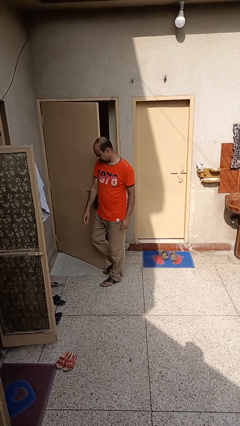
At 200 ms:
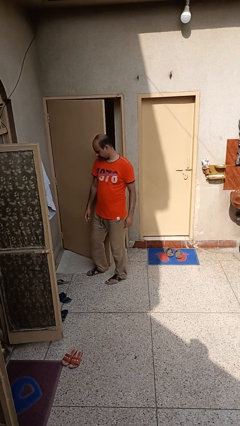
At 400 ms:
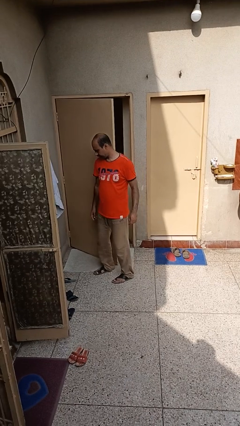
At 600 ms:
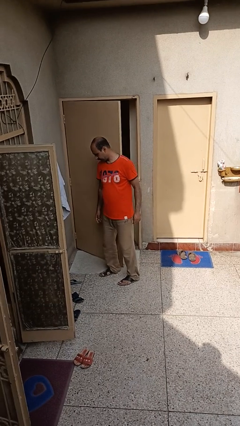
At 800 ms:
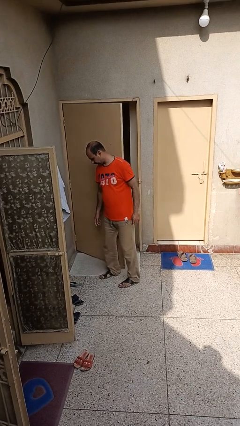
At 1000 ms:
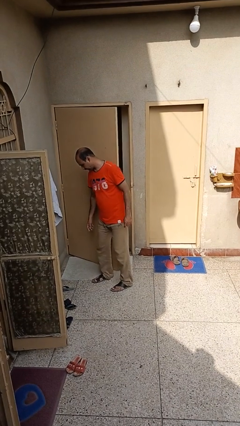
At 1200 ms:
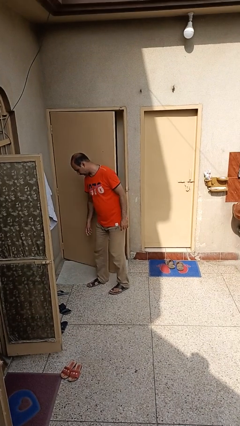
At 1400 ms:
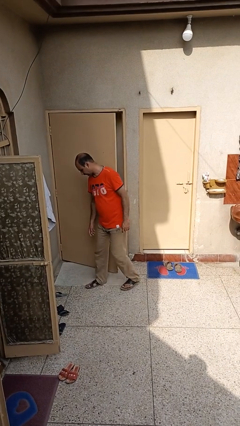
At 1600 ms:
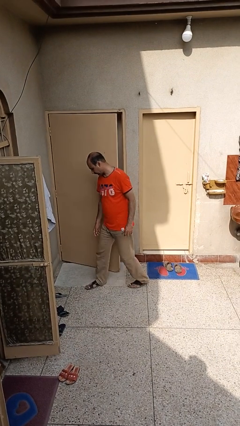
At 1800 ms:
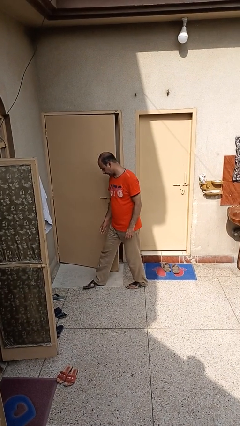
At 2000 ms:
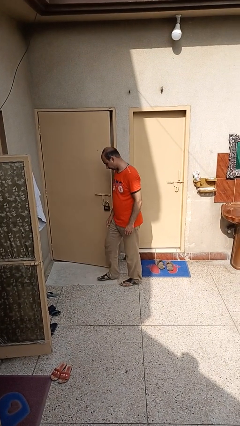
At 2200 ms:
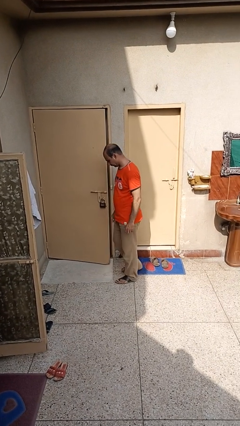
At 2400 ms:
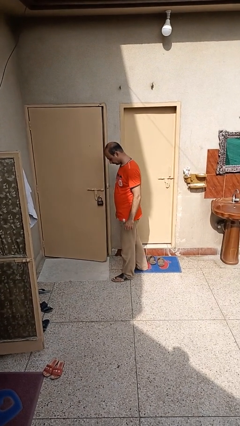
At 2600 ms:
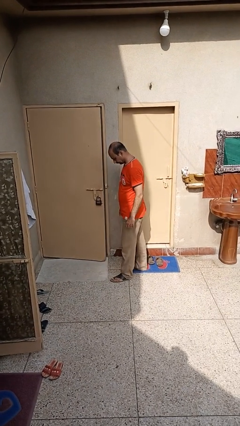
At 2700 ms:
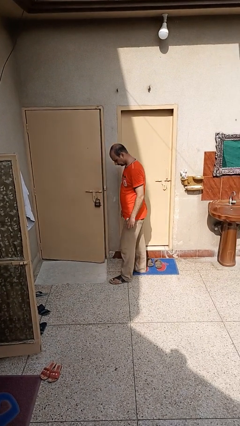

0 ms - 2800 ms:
person closes door with hip

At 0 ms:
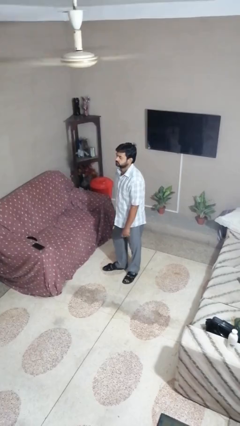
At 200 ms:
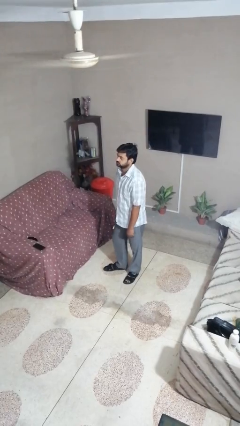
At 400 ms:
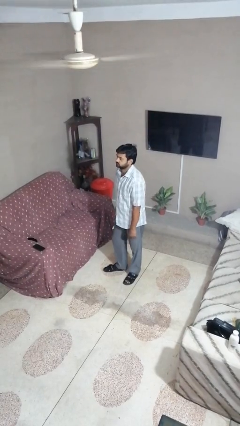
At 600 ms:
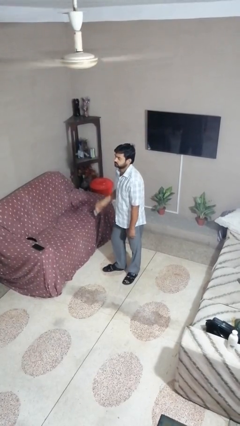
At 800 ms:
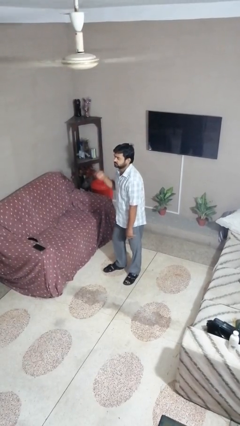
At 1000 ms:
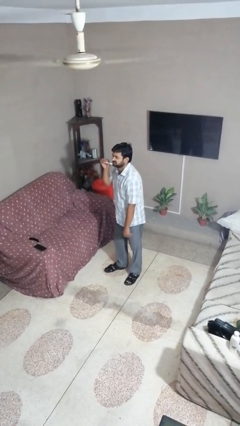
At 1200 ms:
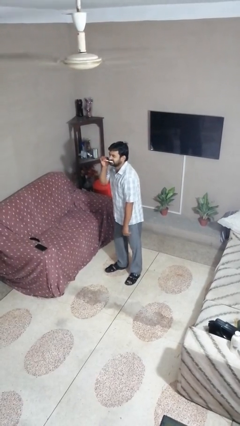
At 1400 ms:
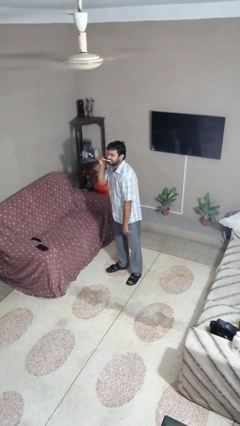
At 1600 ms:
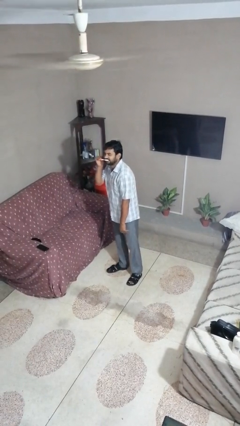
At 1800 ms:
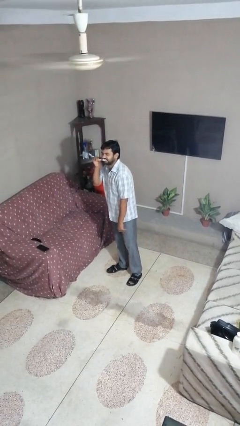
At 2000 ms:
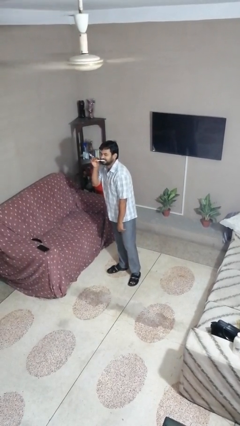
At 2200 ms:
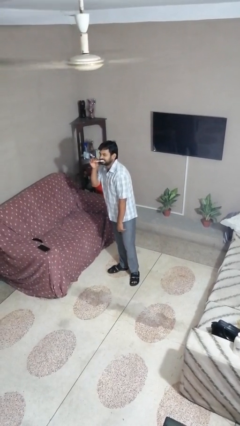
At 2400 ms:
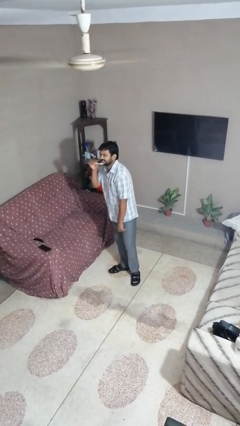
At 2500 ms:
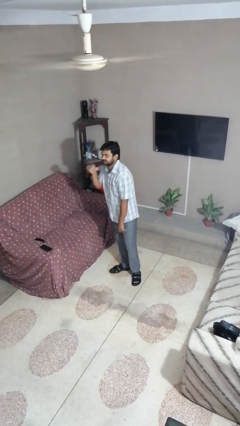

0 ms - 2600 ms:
person brushes teeth

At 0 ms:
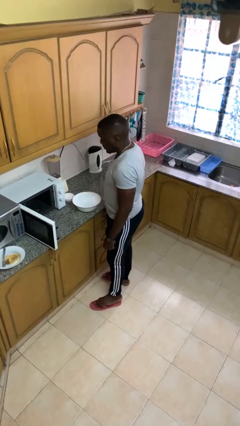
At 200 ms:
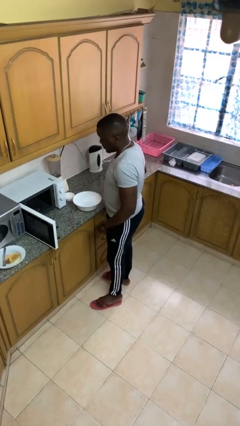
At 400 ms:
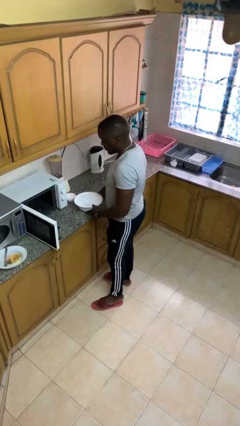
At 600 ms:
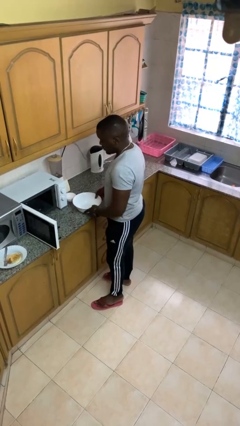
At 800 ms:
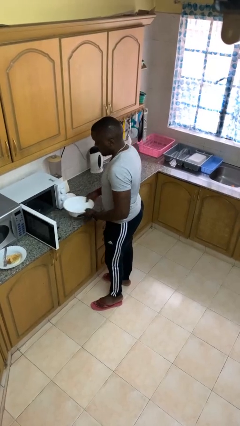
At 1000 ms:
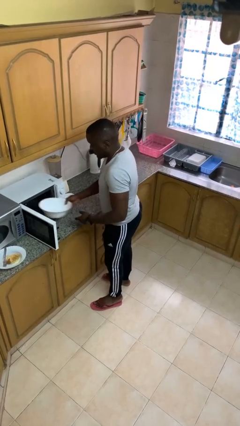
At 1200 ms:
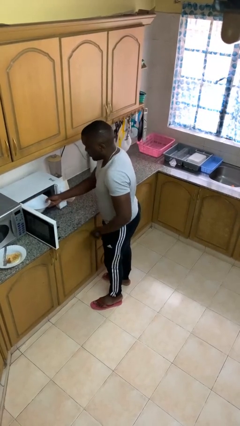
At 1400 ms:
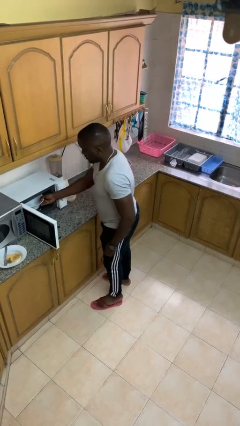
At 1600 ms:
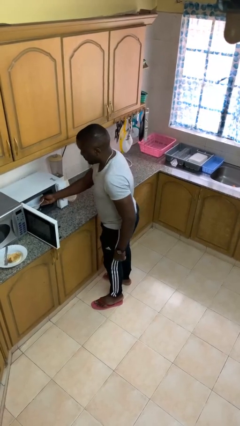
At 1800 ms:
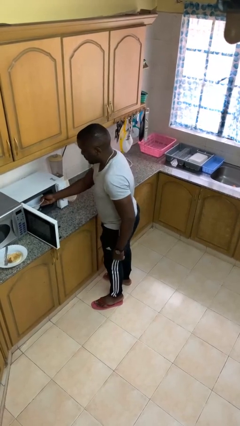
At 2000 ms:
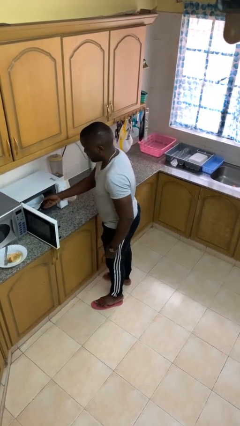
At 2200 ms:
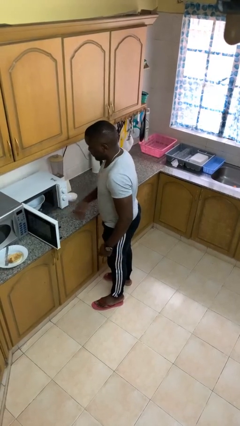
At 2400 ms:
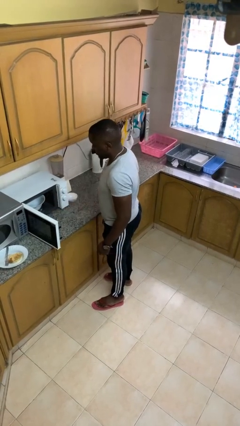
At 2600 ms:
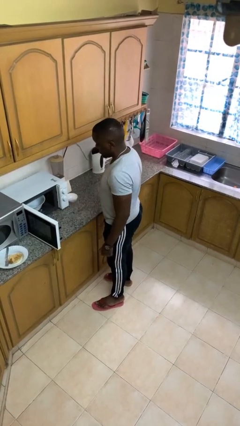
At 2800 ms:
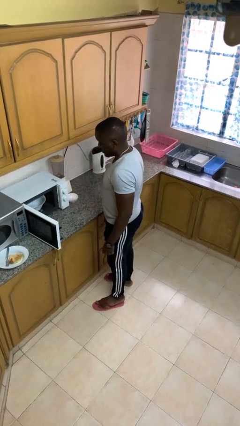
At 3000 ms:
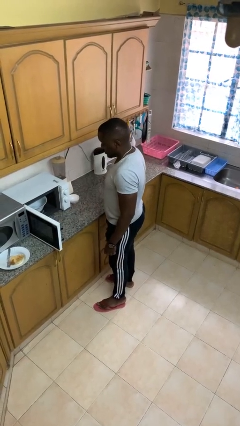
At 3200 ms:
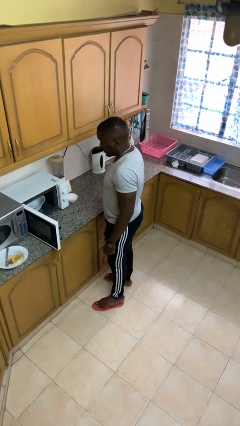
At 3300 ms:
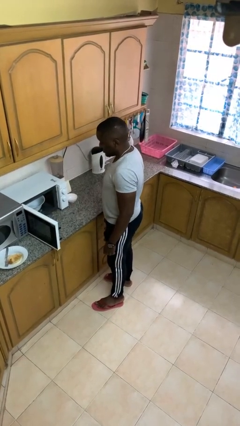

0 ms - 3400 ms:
person puts object into microwave

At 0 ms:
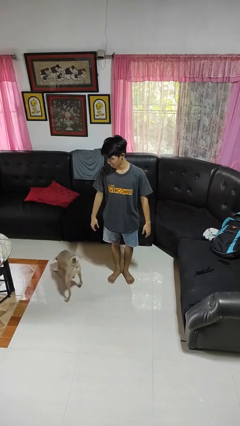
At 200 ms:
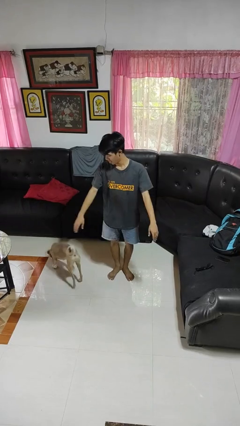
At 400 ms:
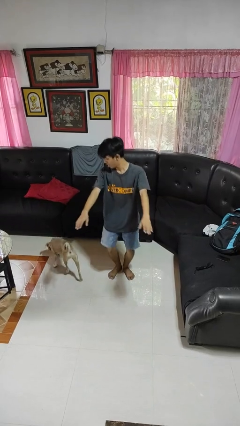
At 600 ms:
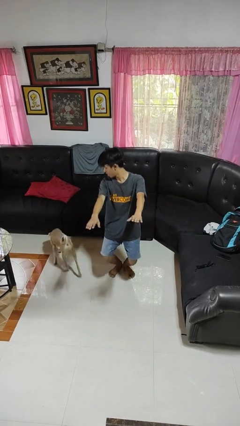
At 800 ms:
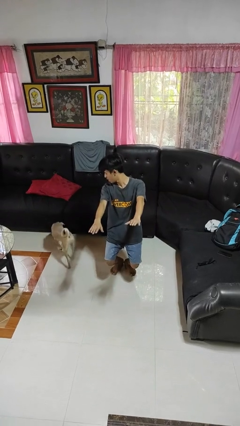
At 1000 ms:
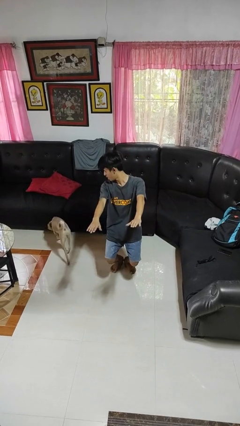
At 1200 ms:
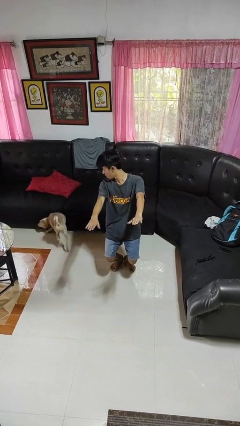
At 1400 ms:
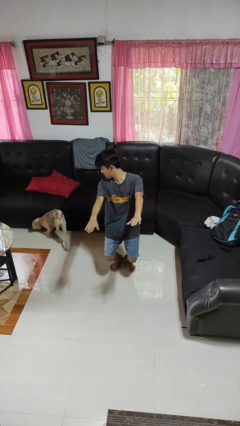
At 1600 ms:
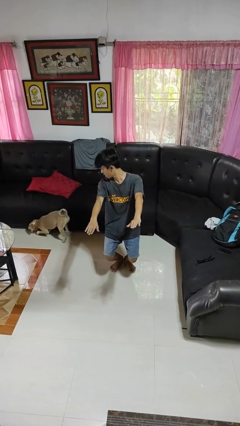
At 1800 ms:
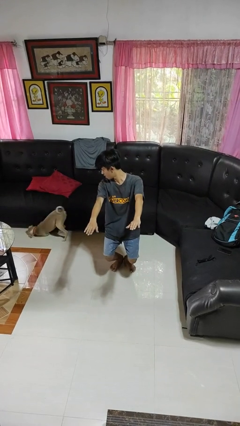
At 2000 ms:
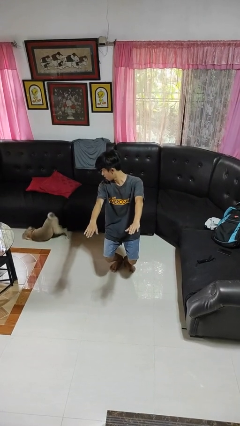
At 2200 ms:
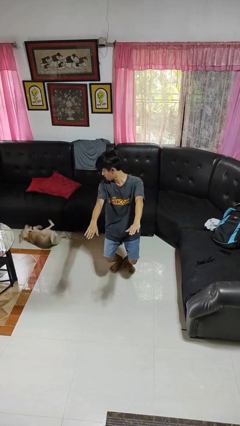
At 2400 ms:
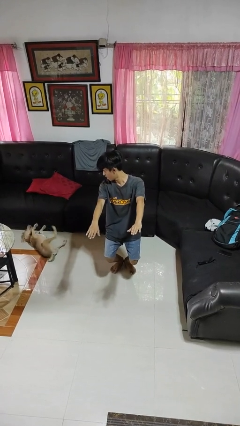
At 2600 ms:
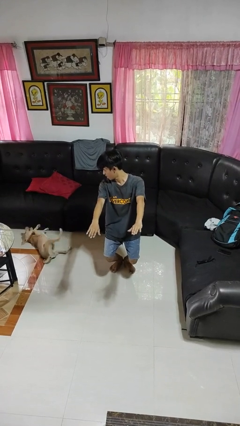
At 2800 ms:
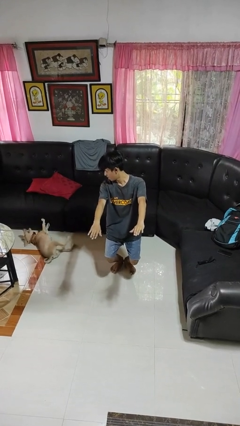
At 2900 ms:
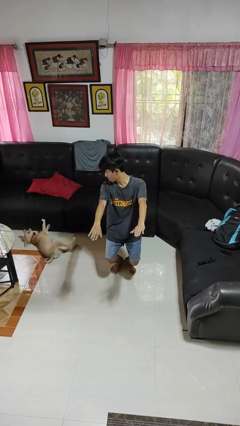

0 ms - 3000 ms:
person squats

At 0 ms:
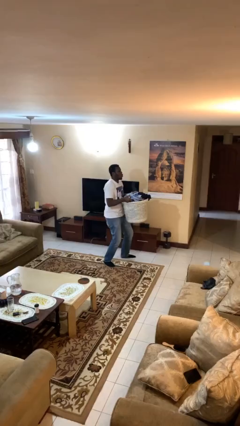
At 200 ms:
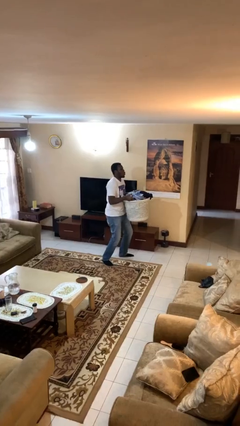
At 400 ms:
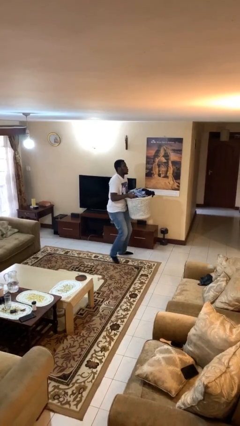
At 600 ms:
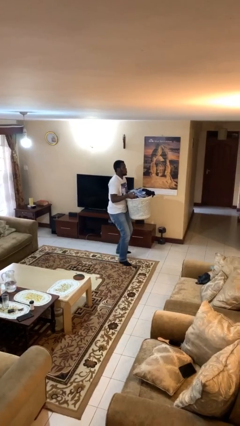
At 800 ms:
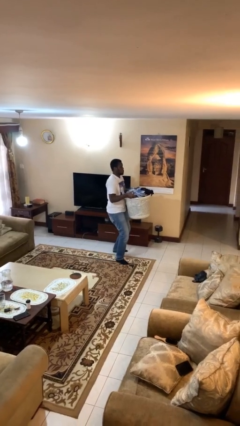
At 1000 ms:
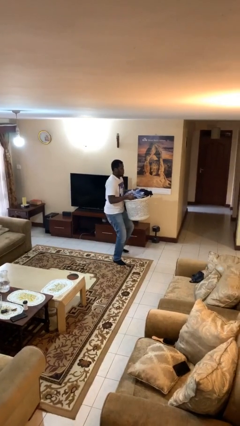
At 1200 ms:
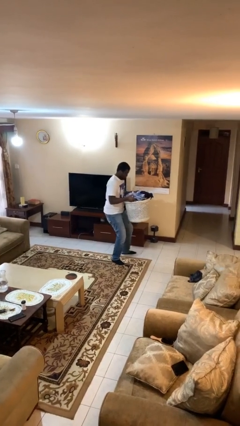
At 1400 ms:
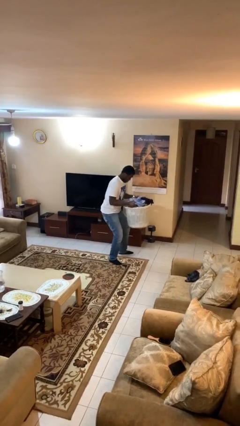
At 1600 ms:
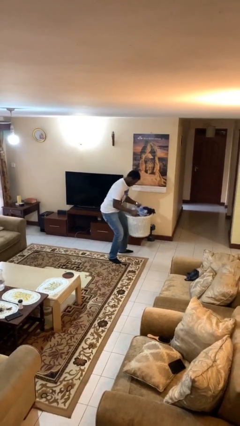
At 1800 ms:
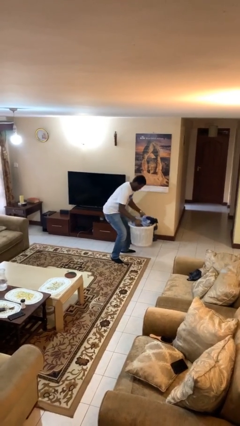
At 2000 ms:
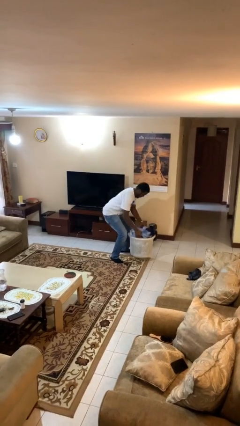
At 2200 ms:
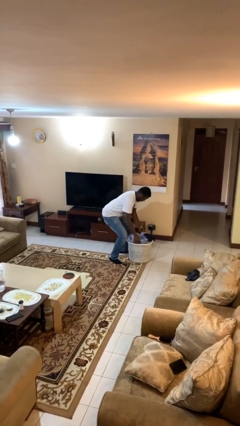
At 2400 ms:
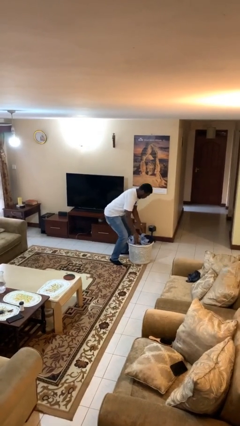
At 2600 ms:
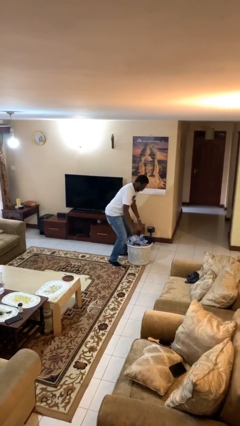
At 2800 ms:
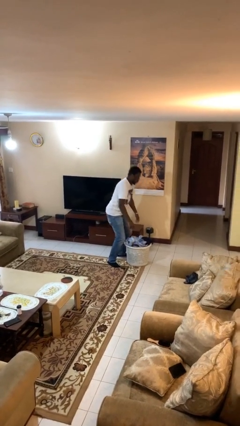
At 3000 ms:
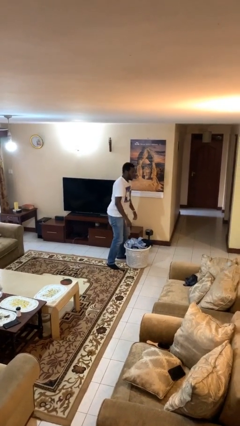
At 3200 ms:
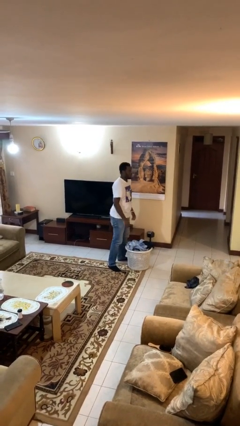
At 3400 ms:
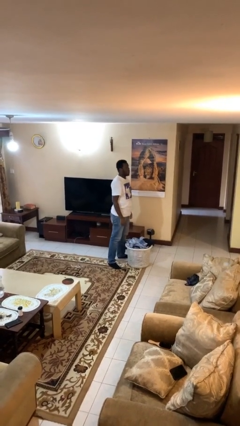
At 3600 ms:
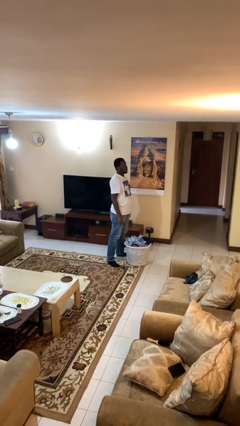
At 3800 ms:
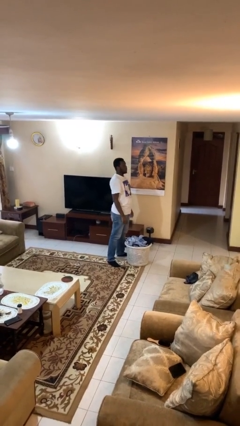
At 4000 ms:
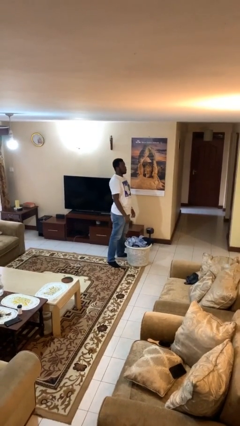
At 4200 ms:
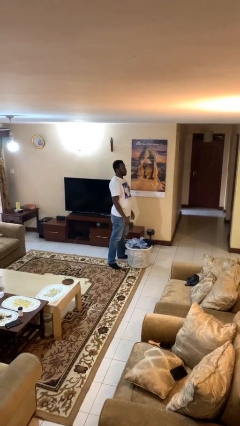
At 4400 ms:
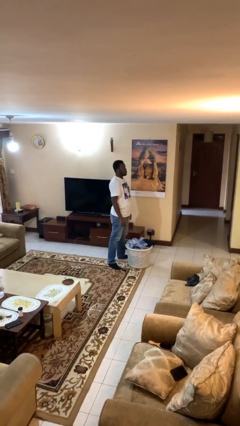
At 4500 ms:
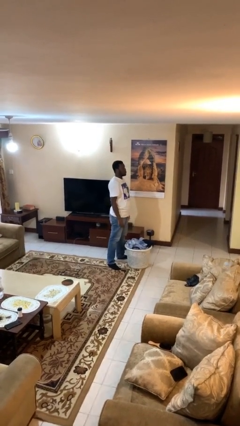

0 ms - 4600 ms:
person puts down object on floor

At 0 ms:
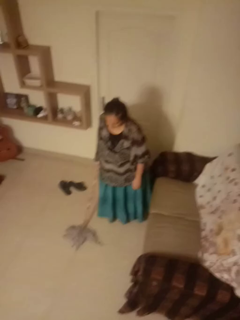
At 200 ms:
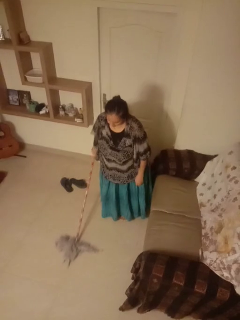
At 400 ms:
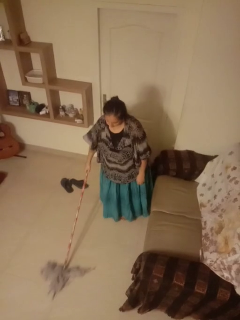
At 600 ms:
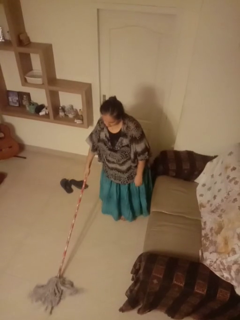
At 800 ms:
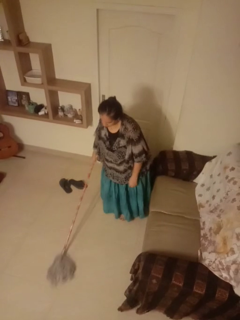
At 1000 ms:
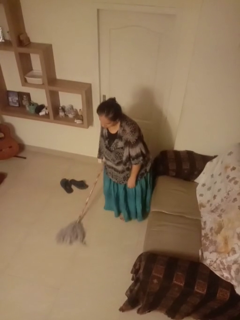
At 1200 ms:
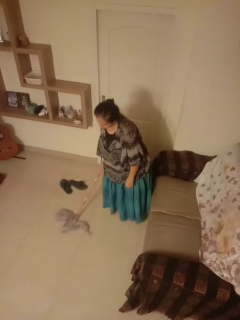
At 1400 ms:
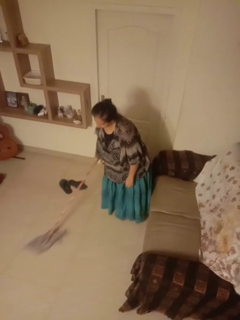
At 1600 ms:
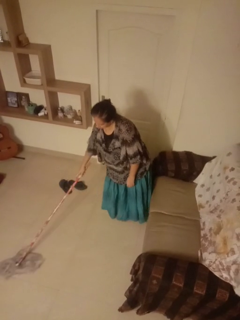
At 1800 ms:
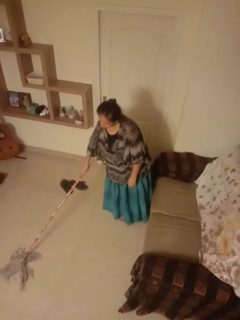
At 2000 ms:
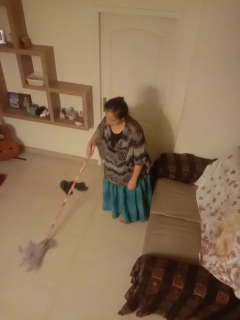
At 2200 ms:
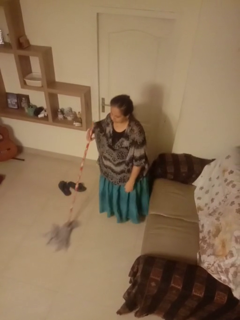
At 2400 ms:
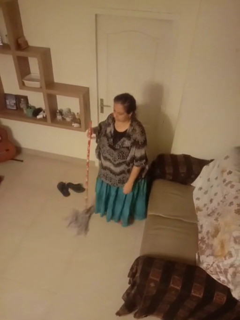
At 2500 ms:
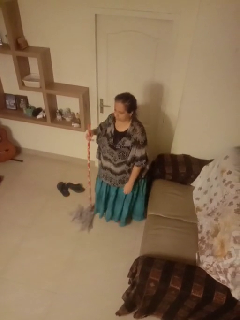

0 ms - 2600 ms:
person mops
